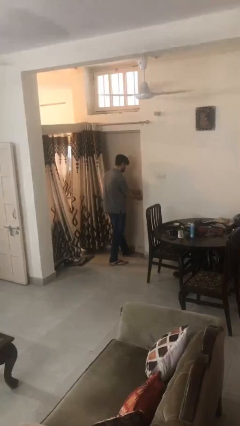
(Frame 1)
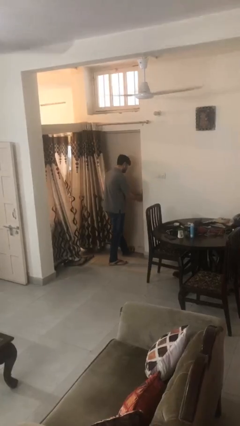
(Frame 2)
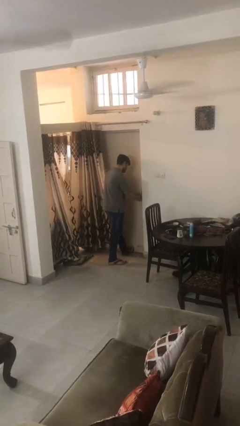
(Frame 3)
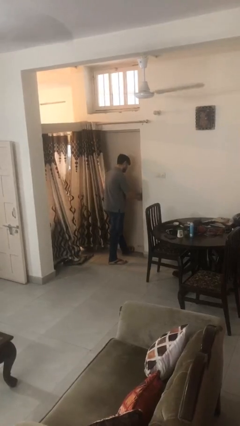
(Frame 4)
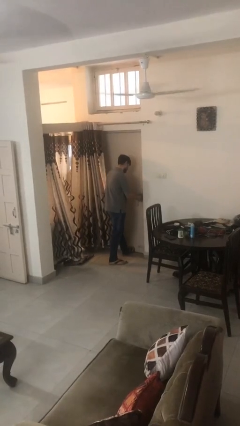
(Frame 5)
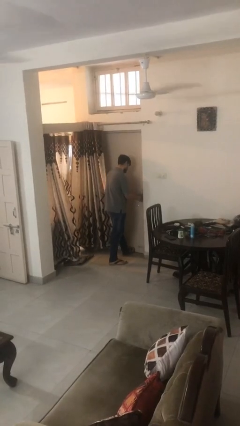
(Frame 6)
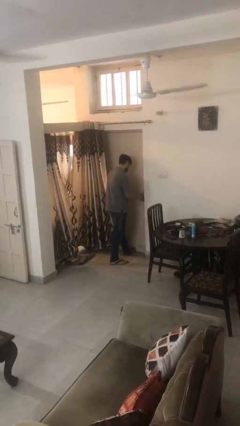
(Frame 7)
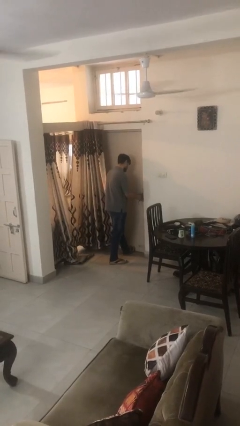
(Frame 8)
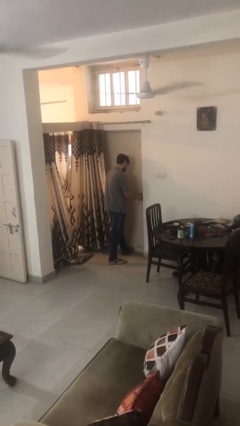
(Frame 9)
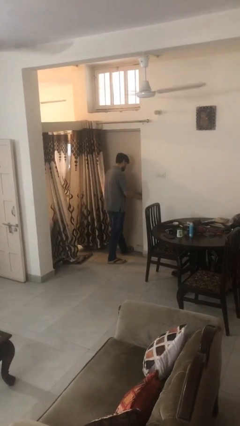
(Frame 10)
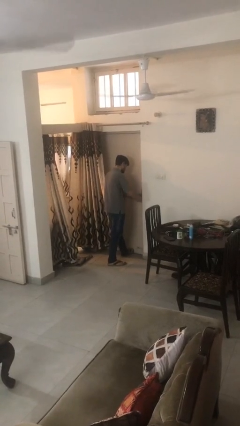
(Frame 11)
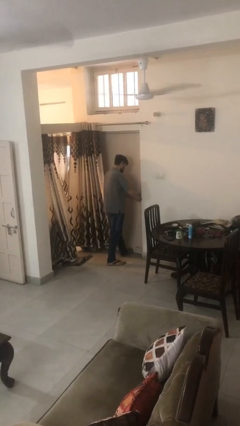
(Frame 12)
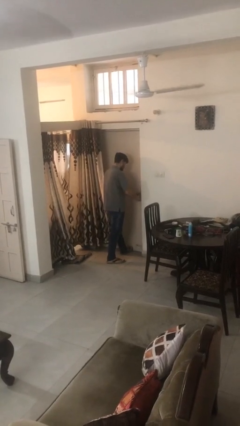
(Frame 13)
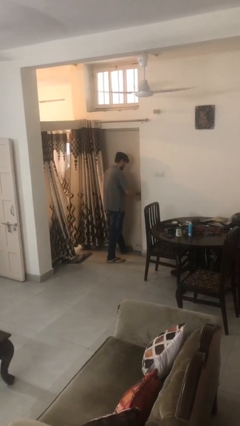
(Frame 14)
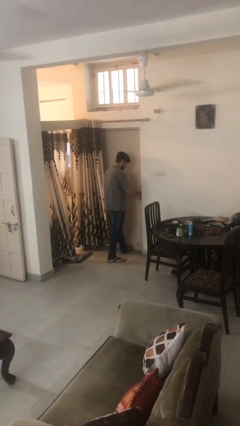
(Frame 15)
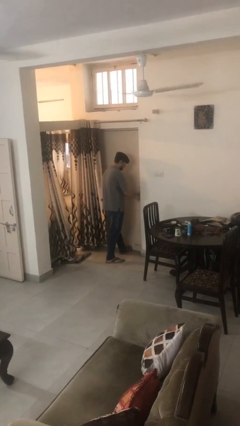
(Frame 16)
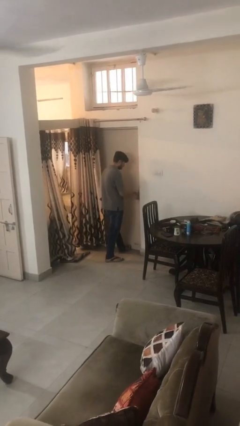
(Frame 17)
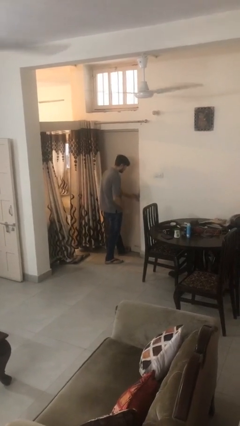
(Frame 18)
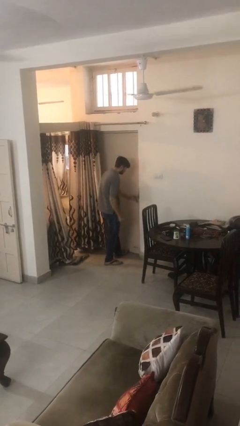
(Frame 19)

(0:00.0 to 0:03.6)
person locks door with keys

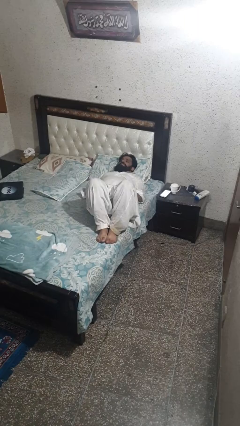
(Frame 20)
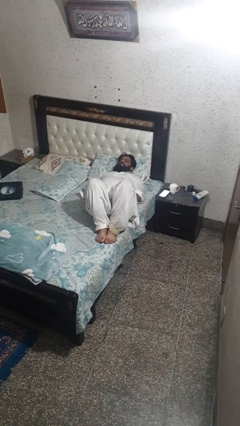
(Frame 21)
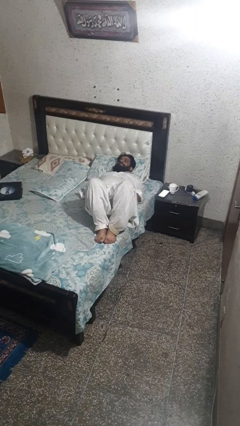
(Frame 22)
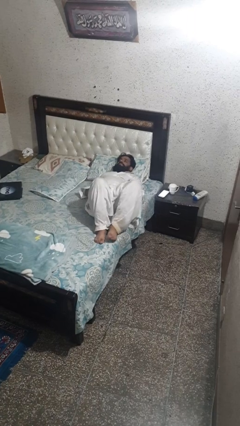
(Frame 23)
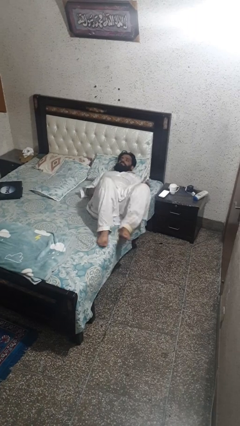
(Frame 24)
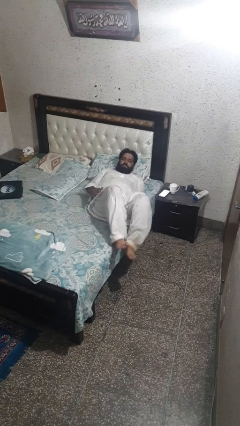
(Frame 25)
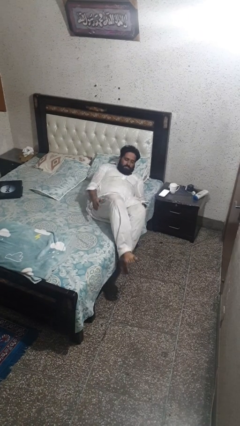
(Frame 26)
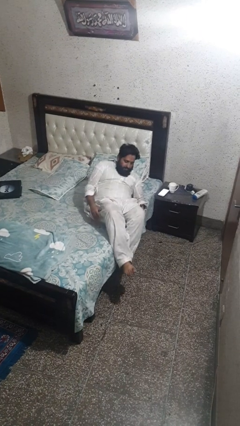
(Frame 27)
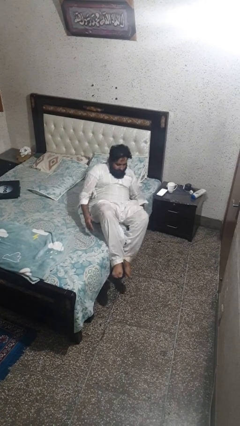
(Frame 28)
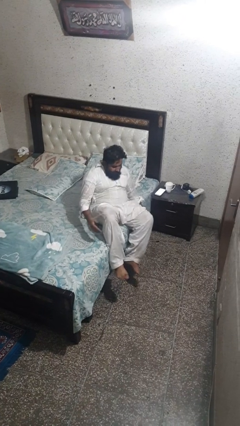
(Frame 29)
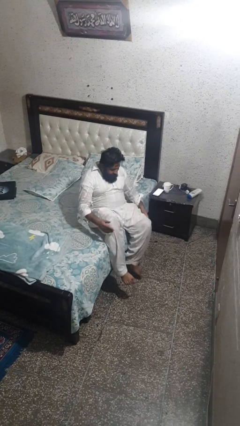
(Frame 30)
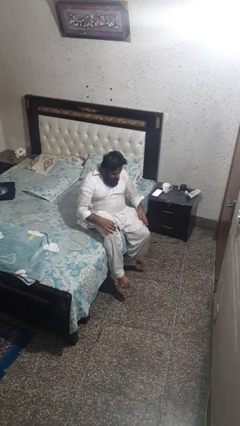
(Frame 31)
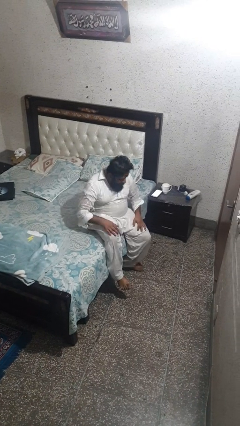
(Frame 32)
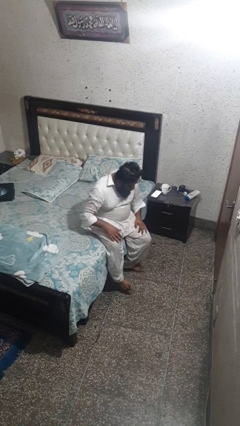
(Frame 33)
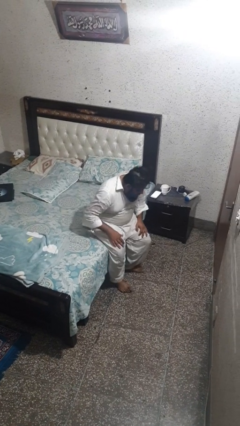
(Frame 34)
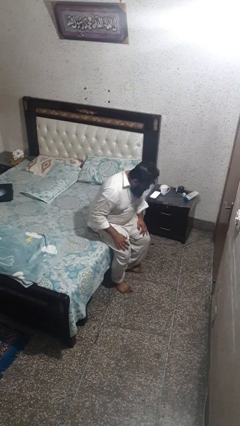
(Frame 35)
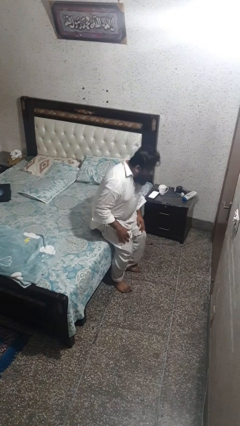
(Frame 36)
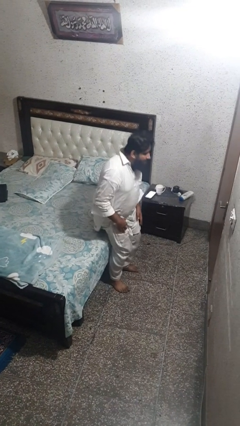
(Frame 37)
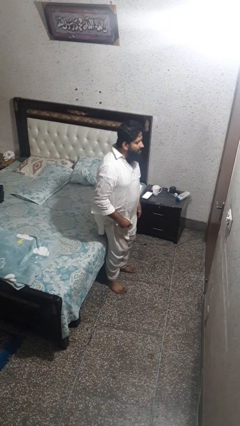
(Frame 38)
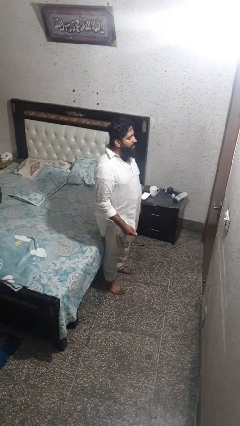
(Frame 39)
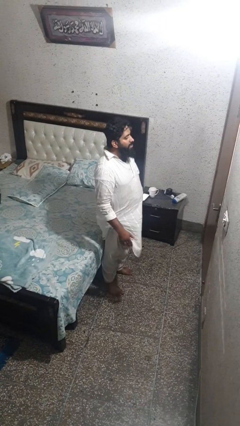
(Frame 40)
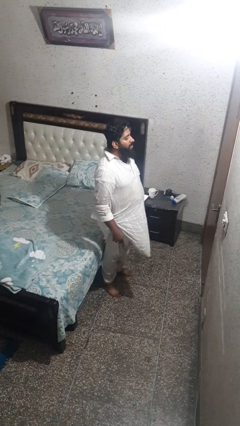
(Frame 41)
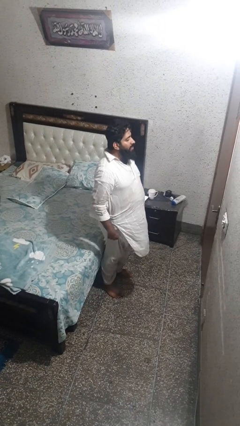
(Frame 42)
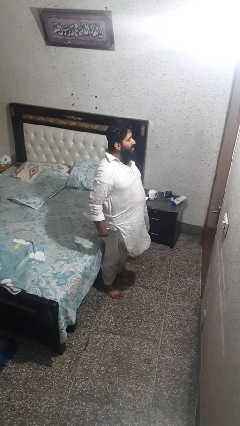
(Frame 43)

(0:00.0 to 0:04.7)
person stands up

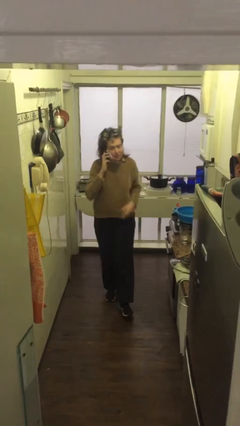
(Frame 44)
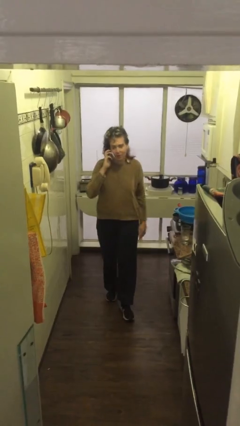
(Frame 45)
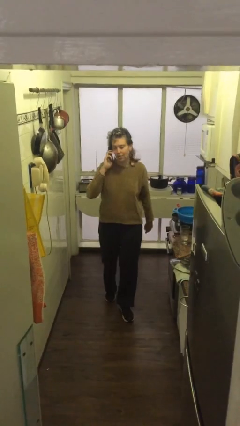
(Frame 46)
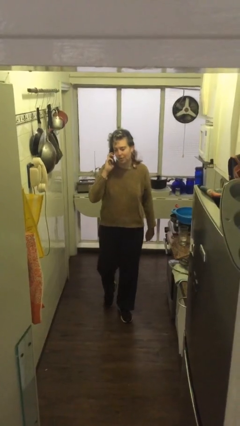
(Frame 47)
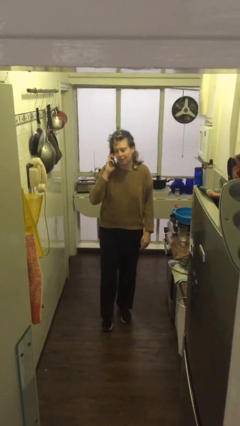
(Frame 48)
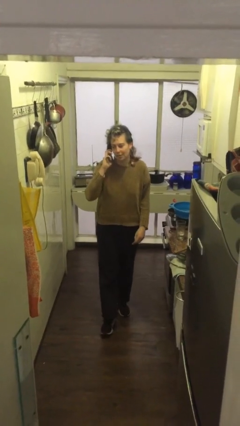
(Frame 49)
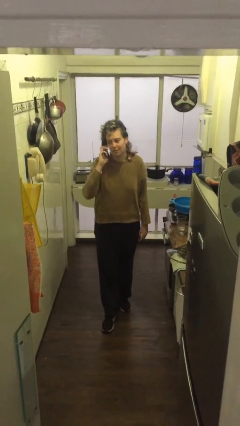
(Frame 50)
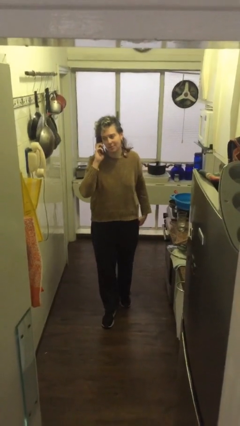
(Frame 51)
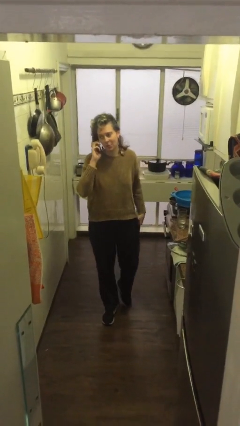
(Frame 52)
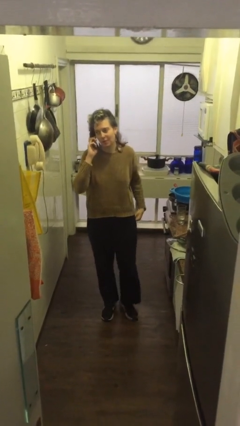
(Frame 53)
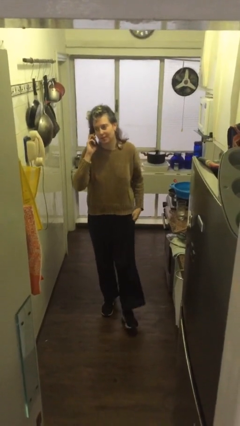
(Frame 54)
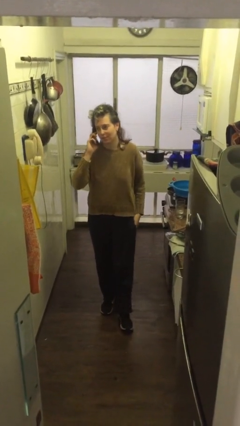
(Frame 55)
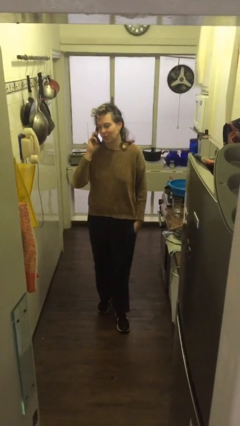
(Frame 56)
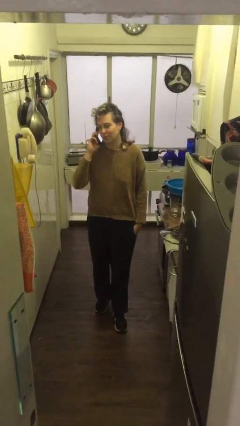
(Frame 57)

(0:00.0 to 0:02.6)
person talks on phone

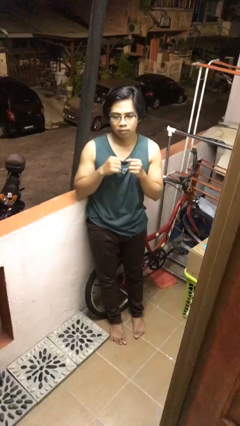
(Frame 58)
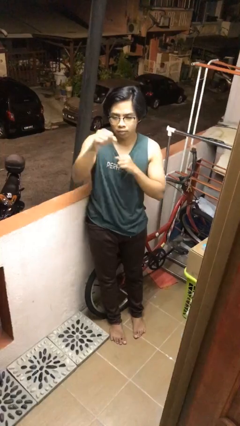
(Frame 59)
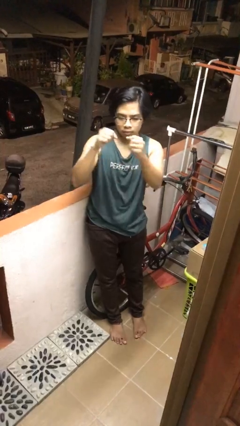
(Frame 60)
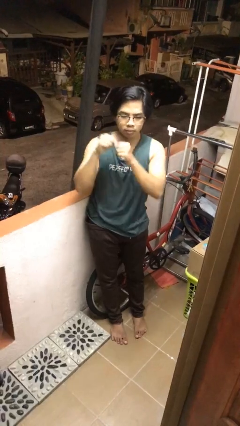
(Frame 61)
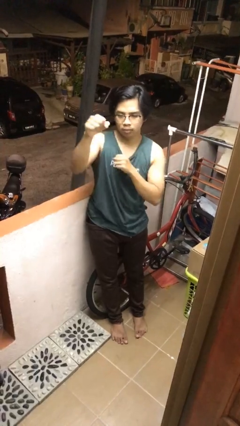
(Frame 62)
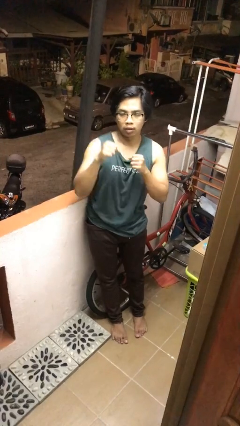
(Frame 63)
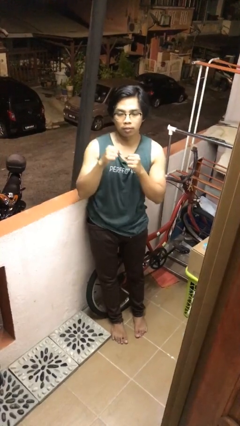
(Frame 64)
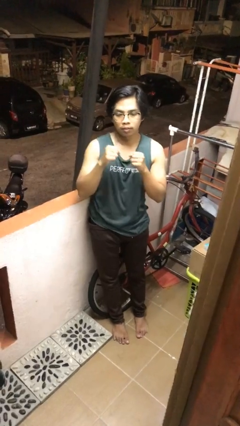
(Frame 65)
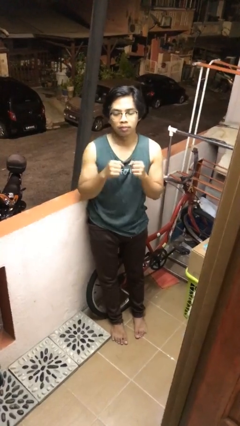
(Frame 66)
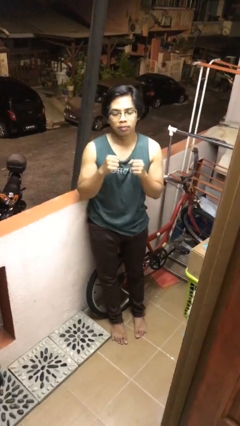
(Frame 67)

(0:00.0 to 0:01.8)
person punches

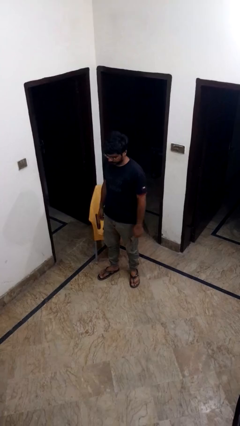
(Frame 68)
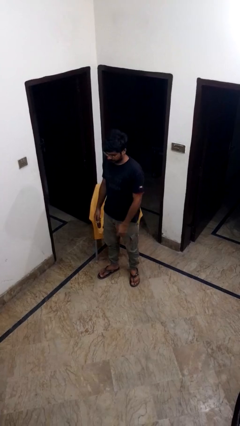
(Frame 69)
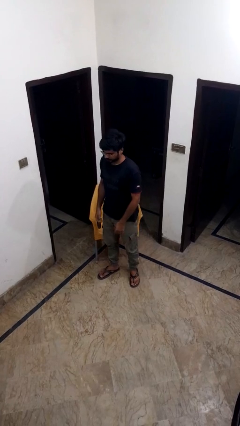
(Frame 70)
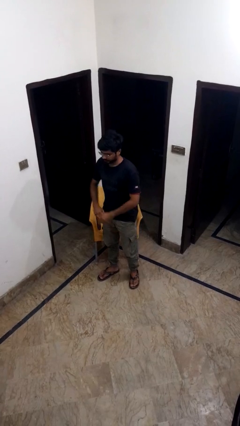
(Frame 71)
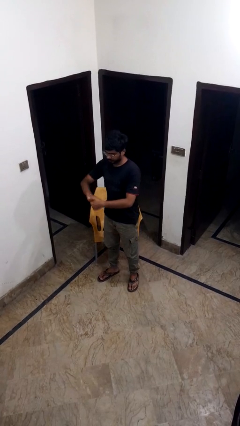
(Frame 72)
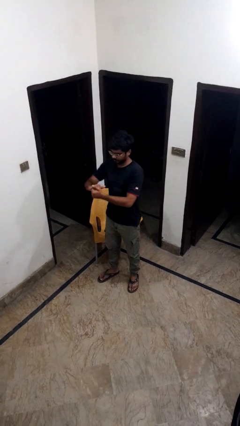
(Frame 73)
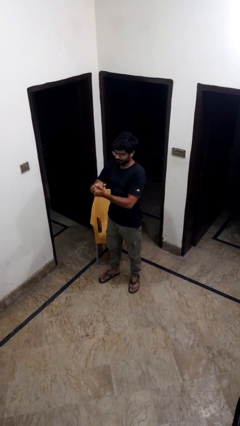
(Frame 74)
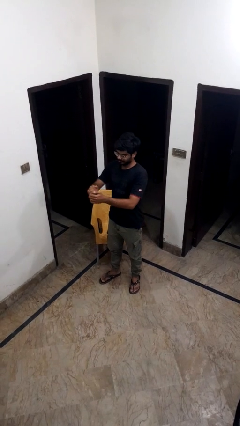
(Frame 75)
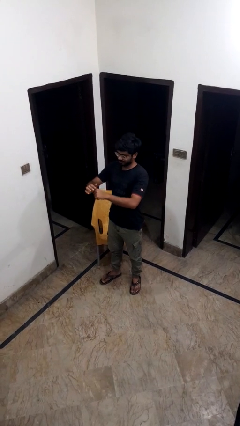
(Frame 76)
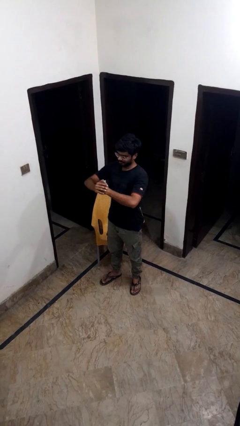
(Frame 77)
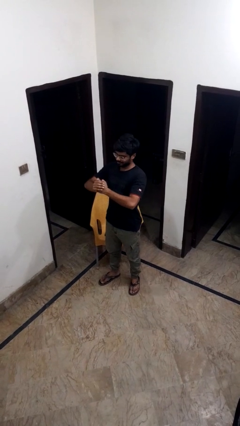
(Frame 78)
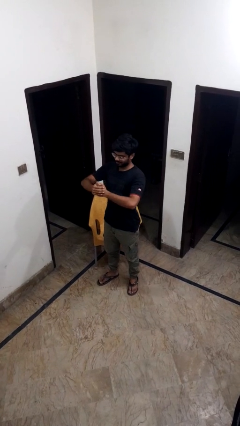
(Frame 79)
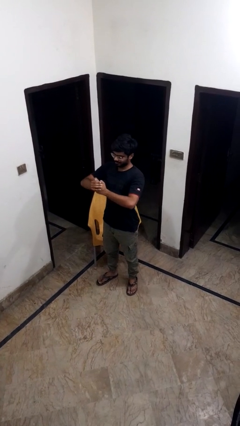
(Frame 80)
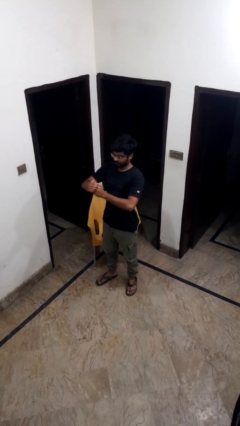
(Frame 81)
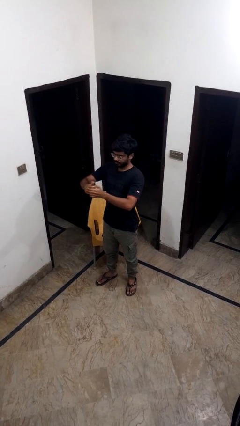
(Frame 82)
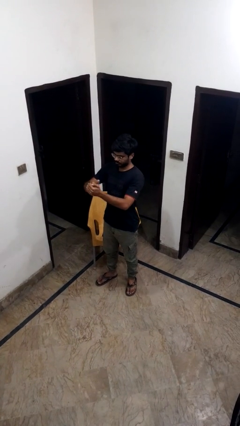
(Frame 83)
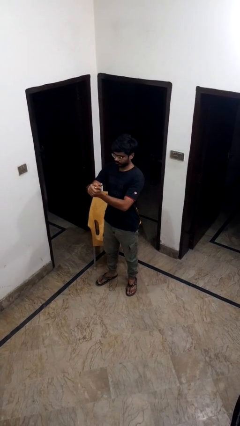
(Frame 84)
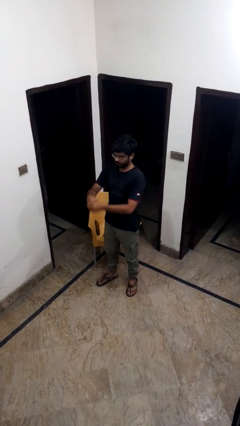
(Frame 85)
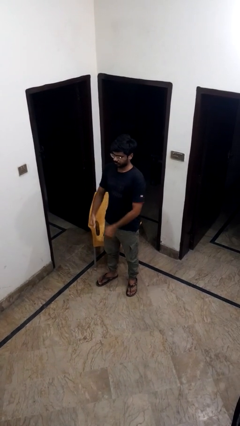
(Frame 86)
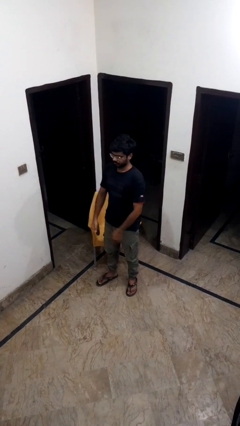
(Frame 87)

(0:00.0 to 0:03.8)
person cracks knuckles

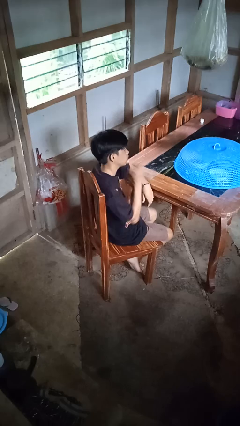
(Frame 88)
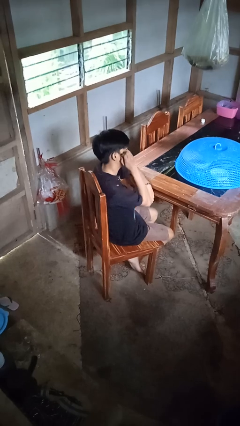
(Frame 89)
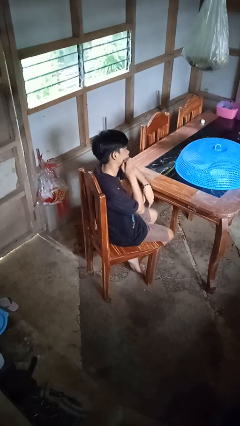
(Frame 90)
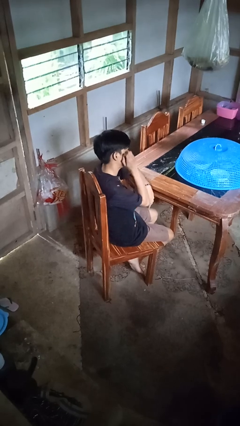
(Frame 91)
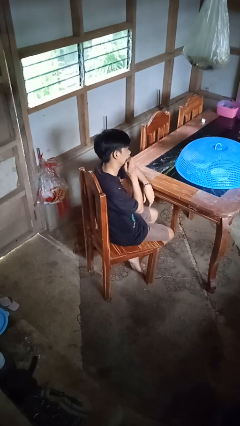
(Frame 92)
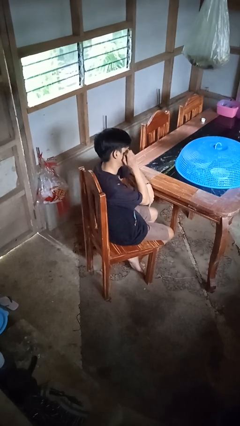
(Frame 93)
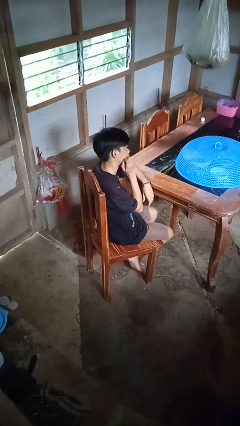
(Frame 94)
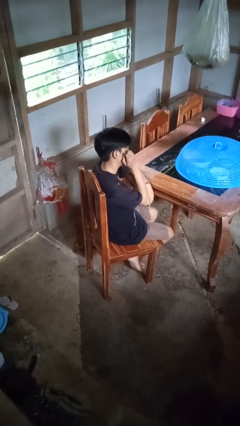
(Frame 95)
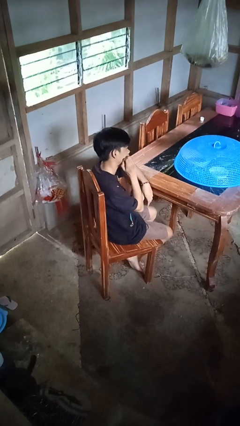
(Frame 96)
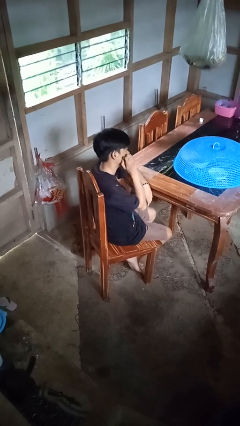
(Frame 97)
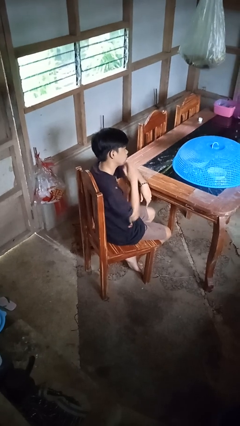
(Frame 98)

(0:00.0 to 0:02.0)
person scratches face
